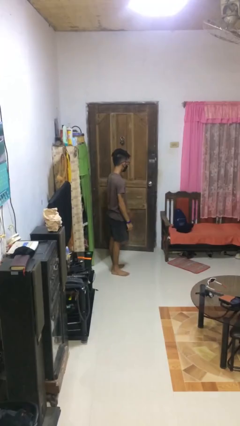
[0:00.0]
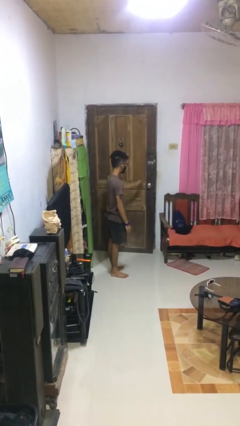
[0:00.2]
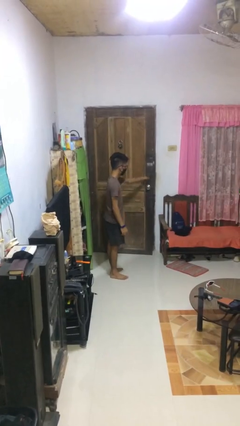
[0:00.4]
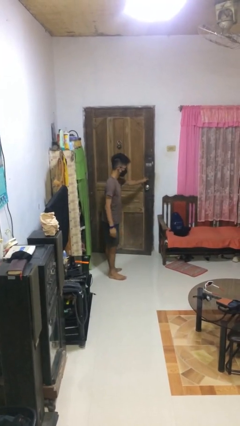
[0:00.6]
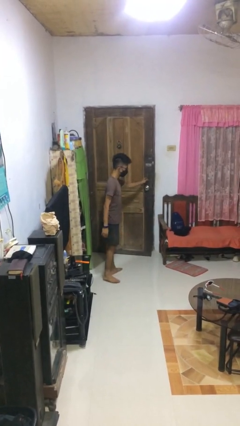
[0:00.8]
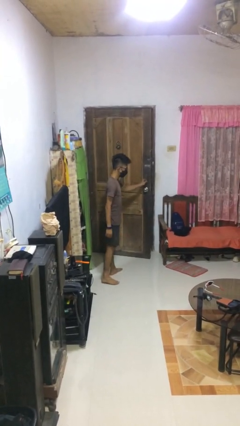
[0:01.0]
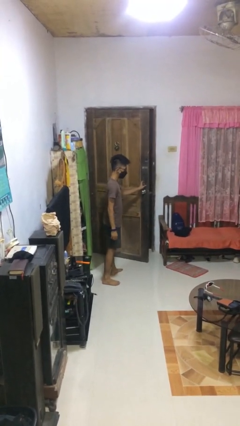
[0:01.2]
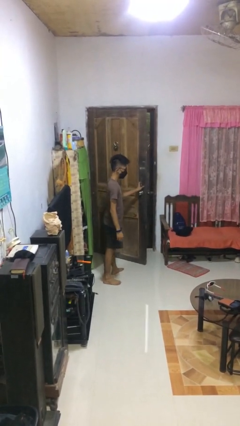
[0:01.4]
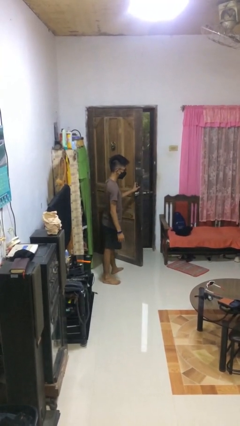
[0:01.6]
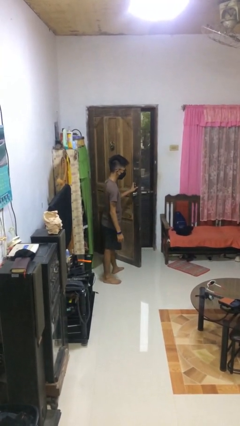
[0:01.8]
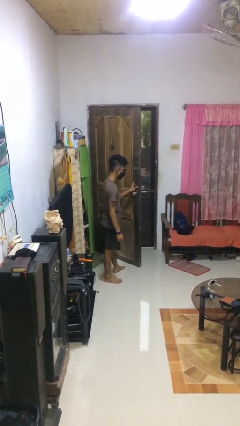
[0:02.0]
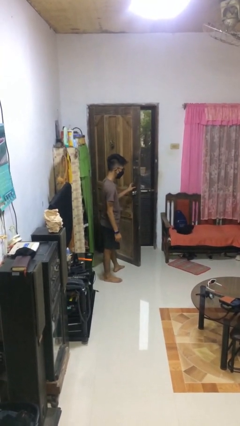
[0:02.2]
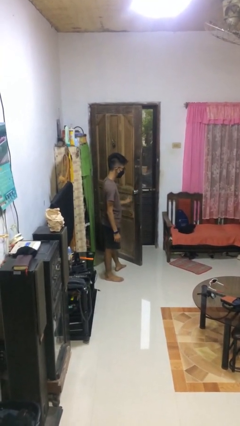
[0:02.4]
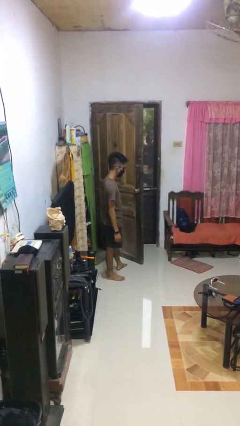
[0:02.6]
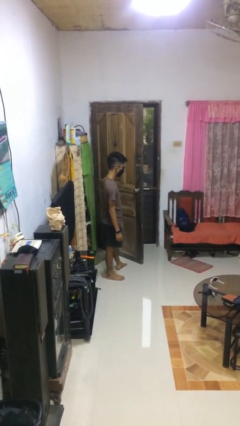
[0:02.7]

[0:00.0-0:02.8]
person opens facility door

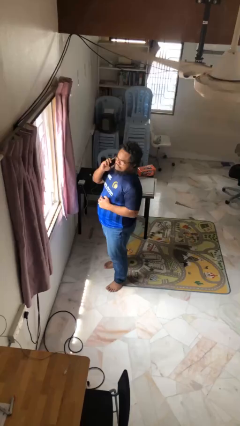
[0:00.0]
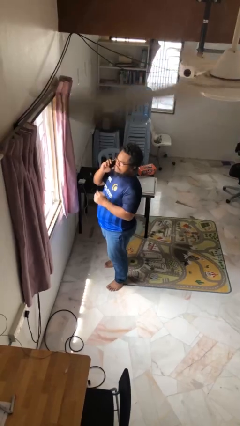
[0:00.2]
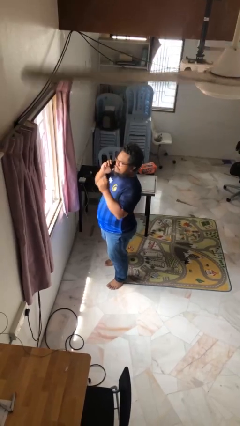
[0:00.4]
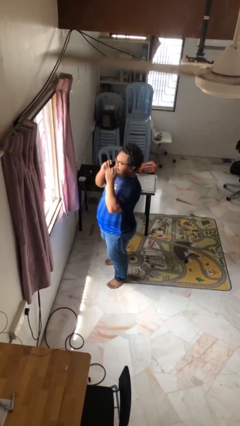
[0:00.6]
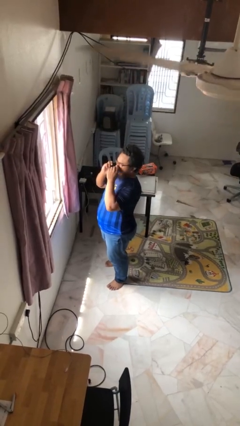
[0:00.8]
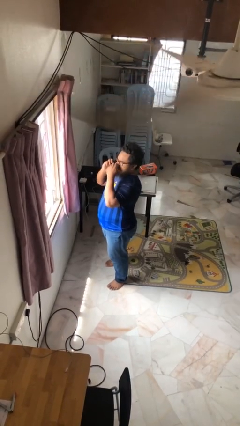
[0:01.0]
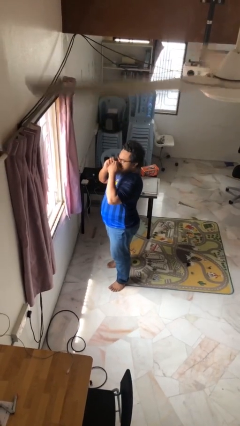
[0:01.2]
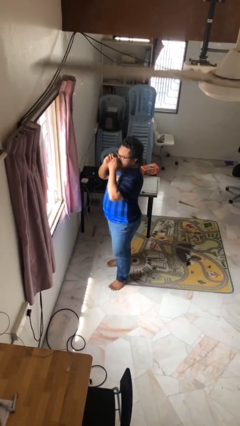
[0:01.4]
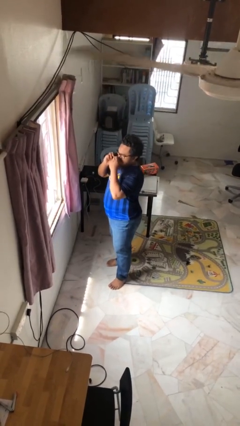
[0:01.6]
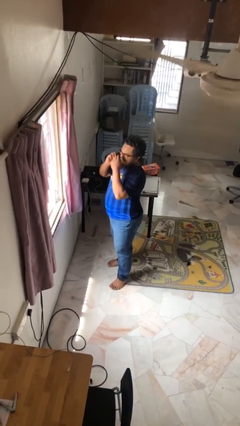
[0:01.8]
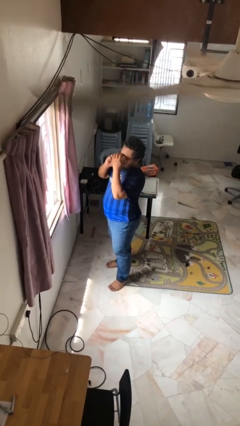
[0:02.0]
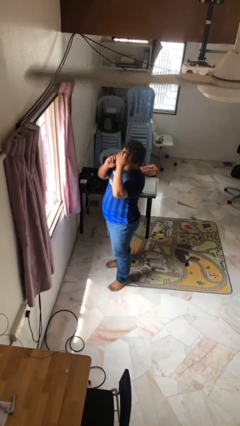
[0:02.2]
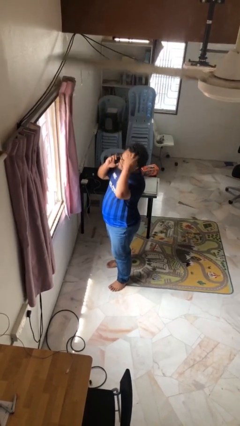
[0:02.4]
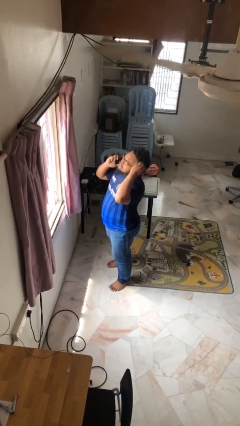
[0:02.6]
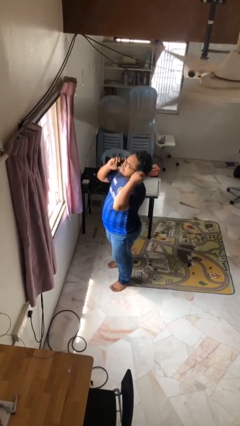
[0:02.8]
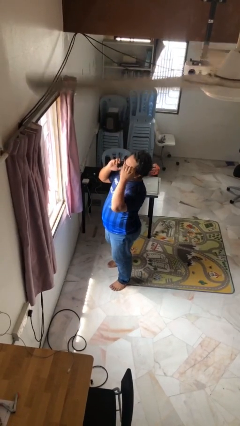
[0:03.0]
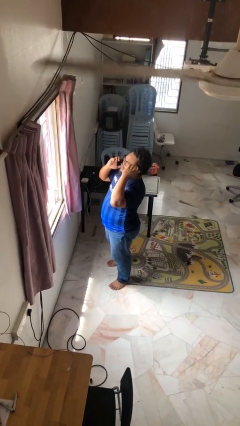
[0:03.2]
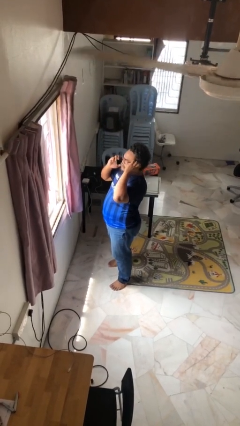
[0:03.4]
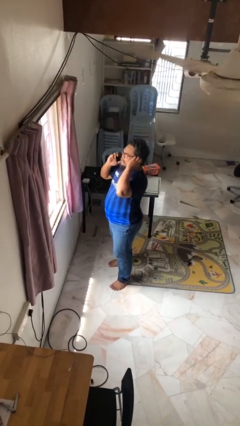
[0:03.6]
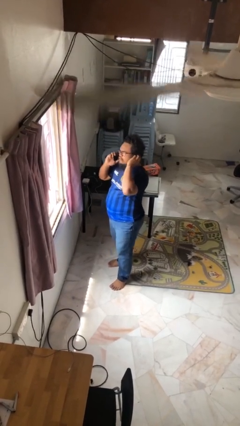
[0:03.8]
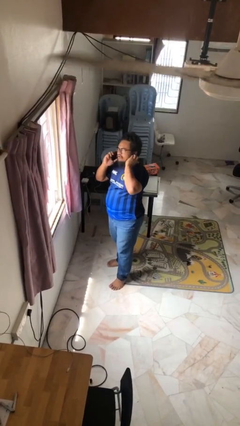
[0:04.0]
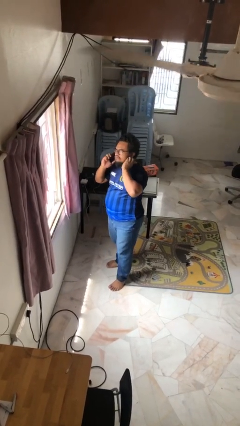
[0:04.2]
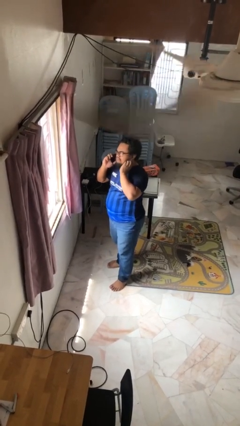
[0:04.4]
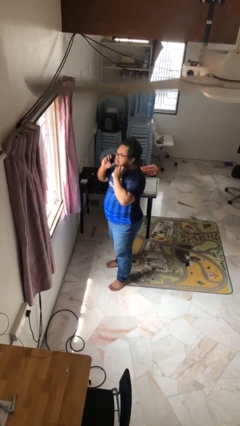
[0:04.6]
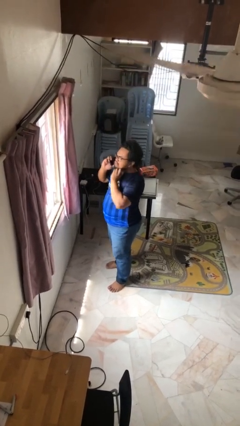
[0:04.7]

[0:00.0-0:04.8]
person talks on phone

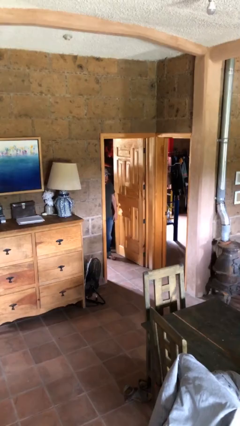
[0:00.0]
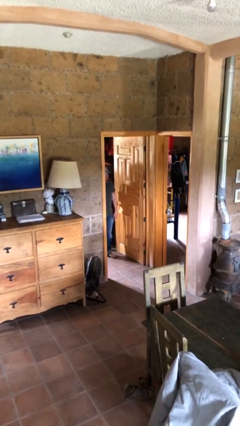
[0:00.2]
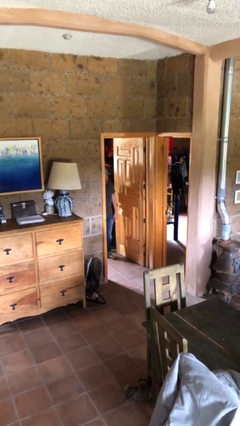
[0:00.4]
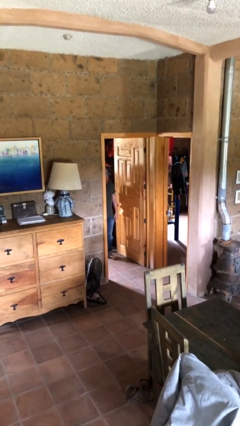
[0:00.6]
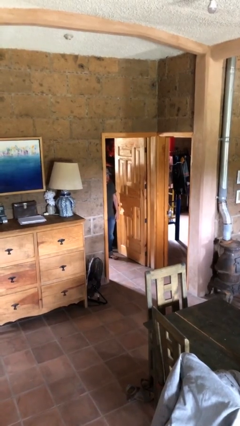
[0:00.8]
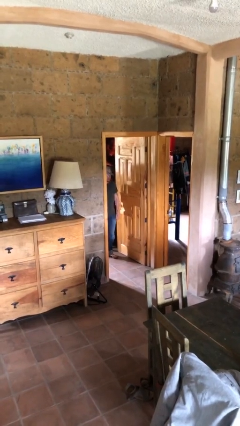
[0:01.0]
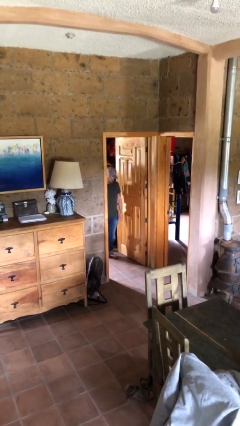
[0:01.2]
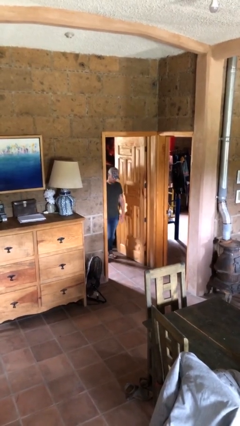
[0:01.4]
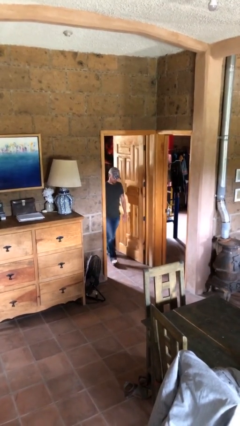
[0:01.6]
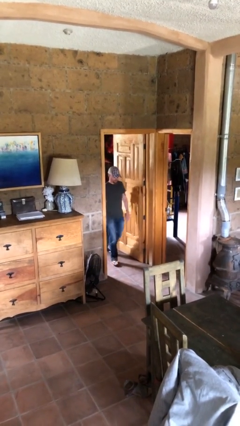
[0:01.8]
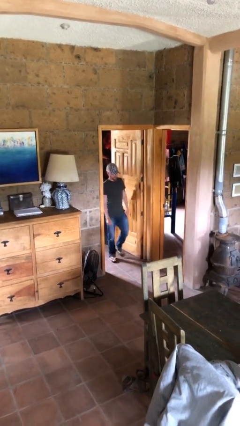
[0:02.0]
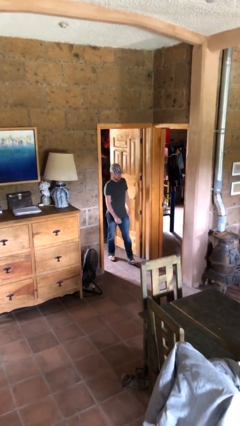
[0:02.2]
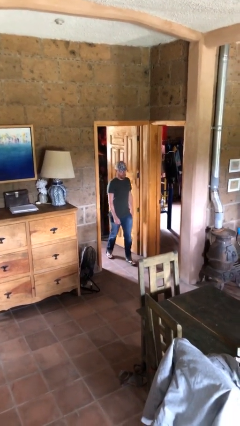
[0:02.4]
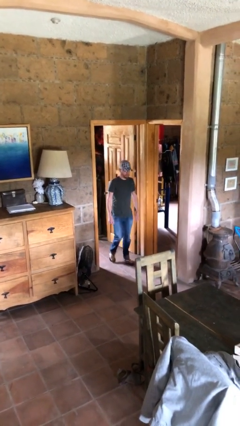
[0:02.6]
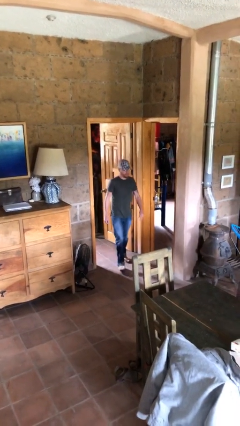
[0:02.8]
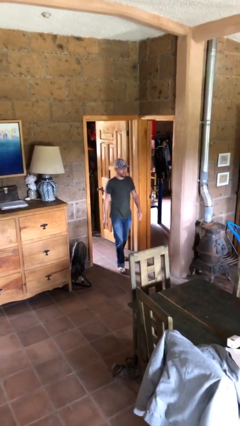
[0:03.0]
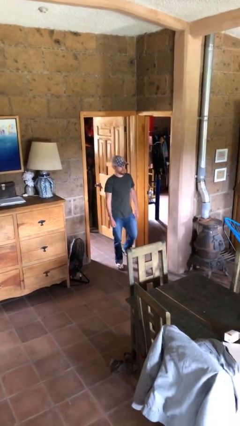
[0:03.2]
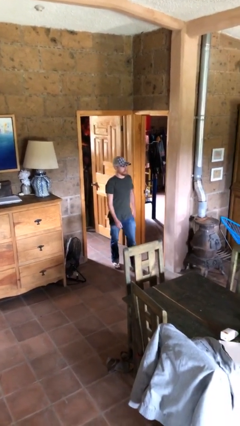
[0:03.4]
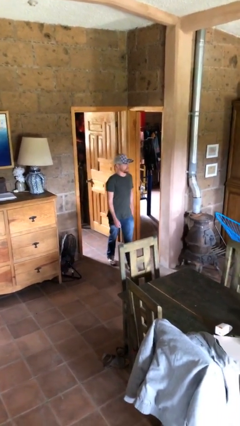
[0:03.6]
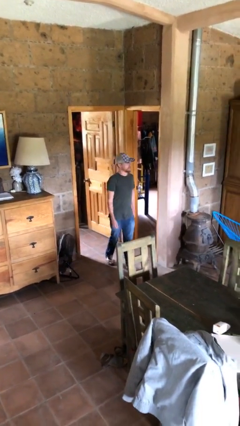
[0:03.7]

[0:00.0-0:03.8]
person enters scene through structure

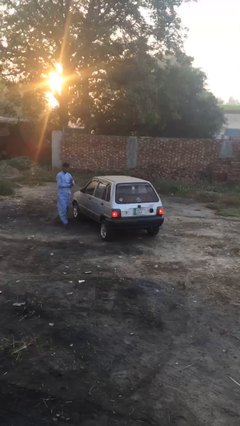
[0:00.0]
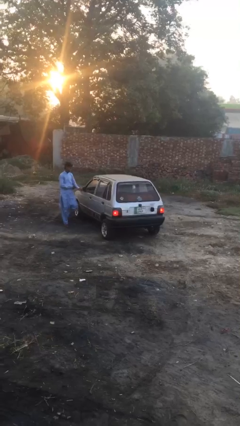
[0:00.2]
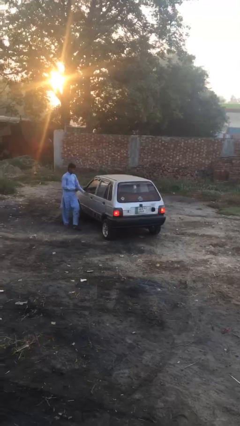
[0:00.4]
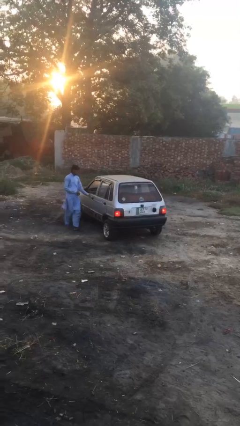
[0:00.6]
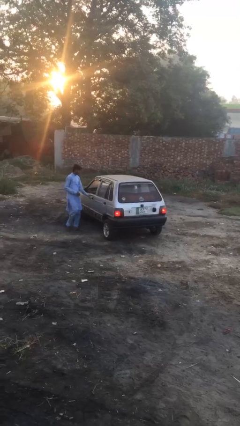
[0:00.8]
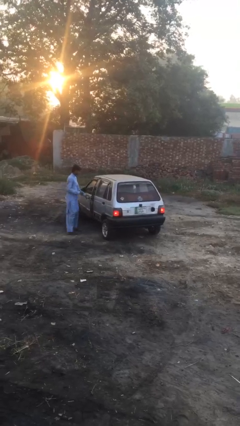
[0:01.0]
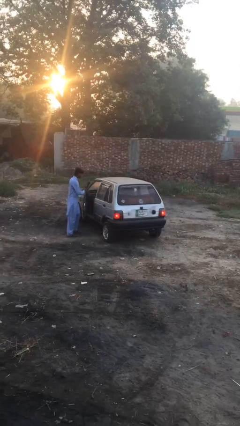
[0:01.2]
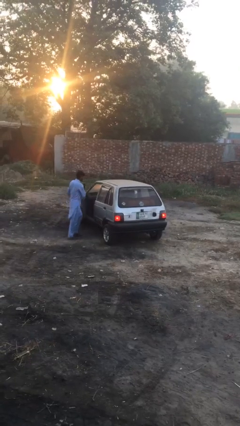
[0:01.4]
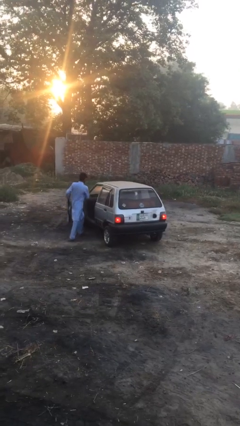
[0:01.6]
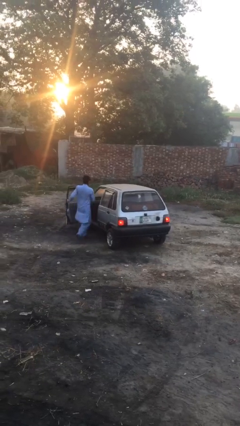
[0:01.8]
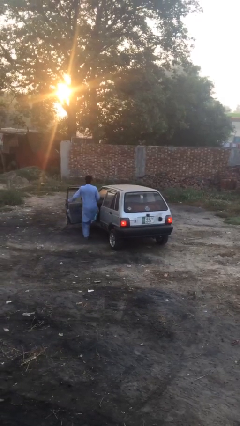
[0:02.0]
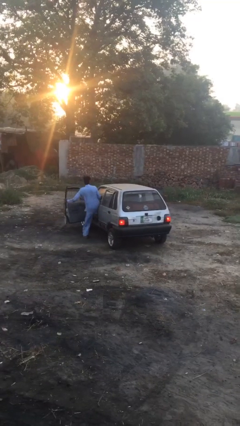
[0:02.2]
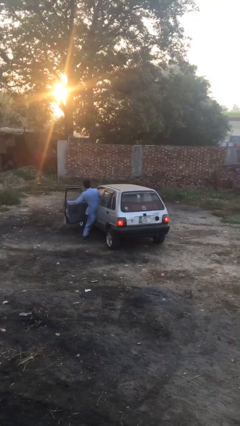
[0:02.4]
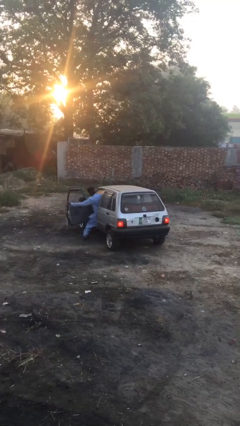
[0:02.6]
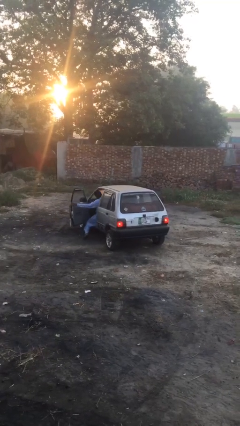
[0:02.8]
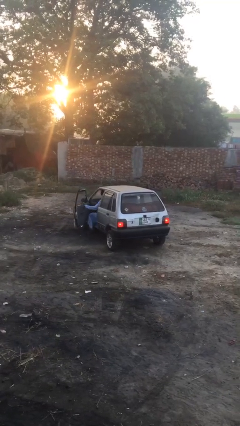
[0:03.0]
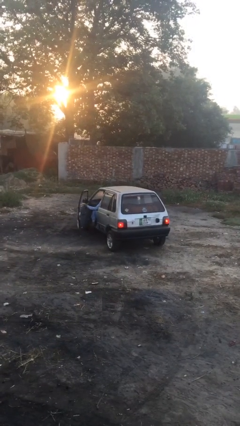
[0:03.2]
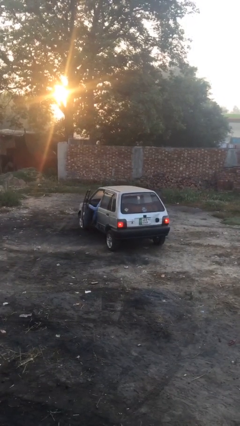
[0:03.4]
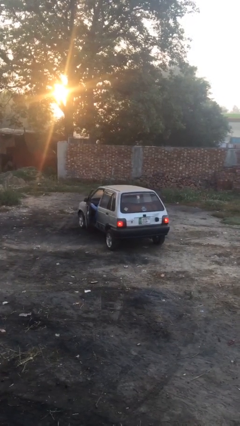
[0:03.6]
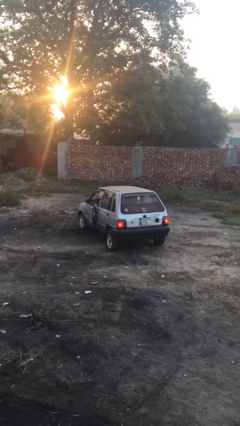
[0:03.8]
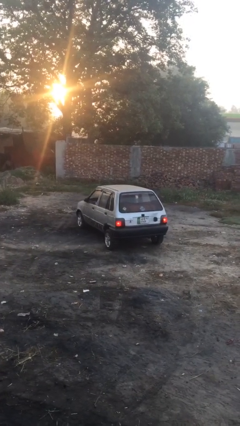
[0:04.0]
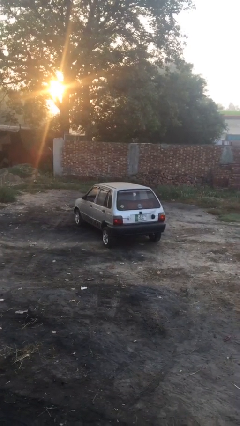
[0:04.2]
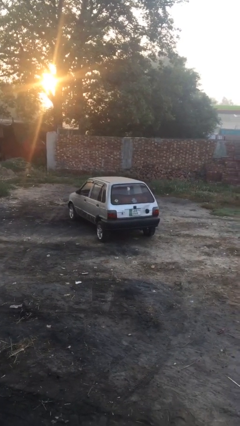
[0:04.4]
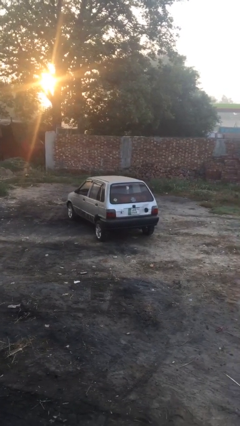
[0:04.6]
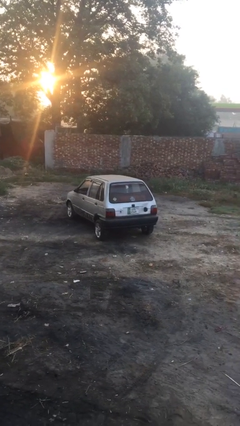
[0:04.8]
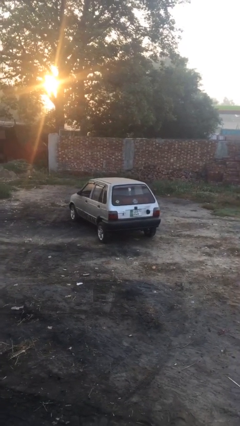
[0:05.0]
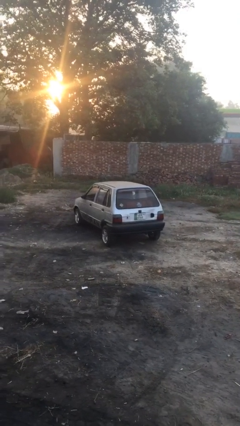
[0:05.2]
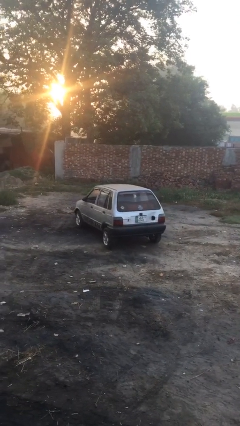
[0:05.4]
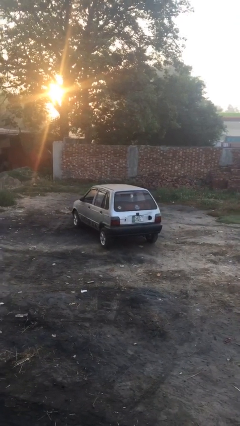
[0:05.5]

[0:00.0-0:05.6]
car picks up person

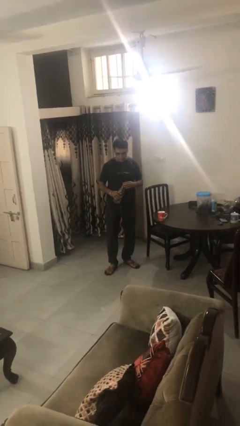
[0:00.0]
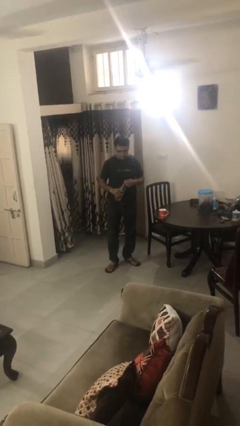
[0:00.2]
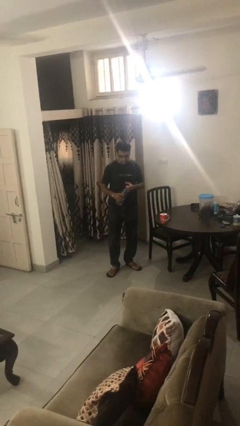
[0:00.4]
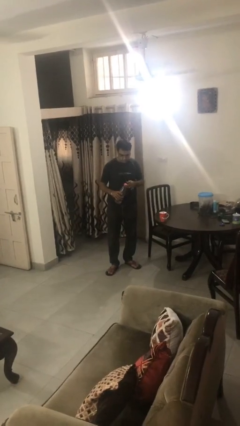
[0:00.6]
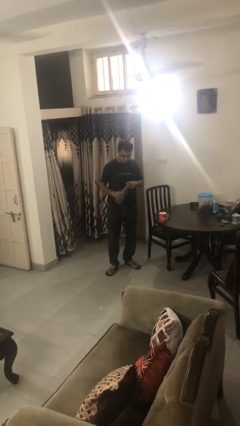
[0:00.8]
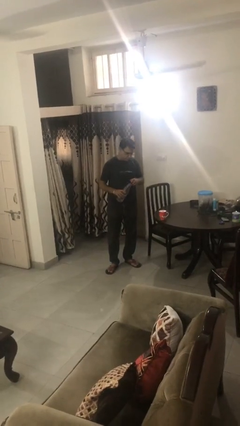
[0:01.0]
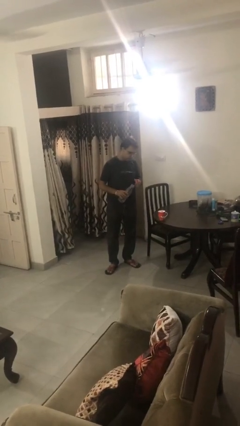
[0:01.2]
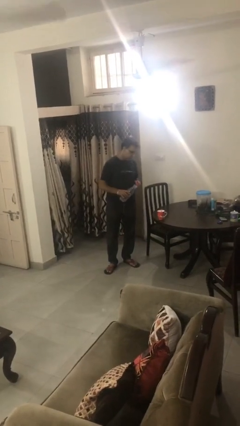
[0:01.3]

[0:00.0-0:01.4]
person unscrews lid from bottle
